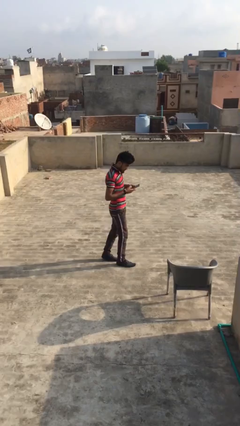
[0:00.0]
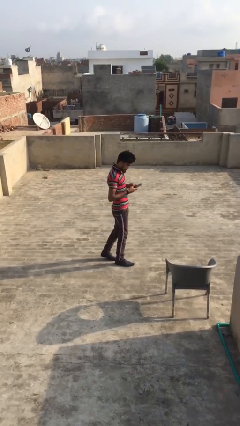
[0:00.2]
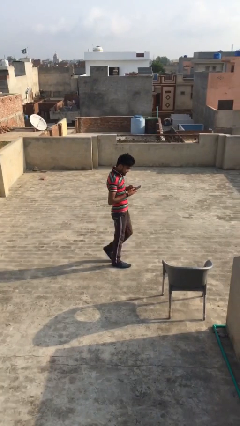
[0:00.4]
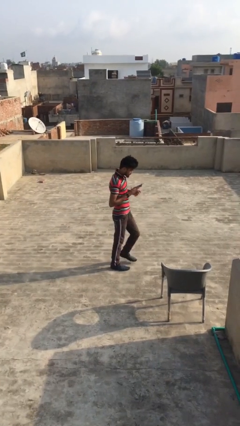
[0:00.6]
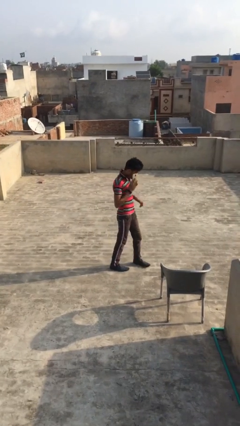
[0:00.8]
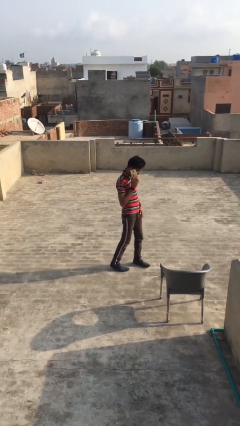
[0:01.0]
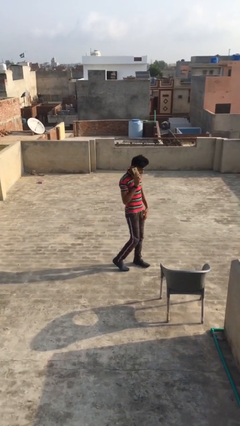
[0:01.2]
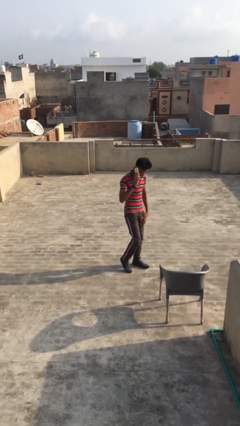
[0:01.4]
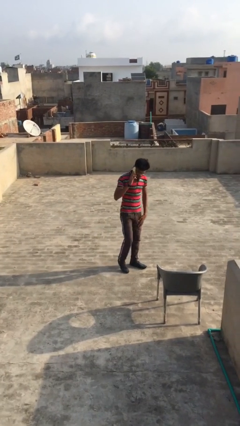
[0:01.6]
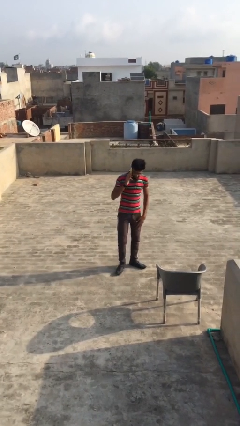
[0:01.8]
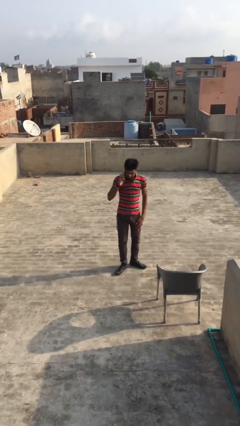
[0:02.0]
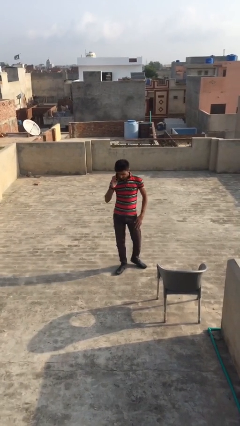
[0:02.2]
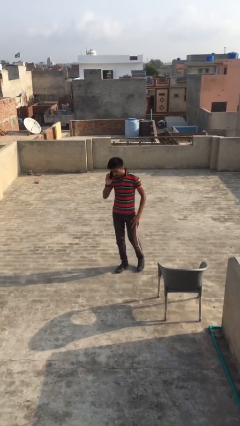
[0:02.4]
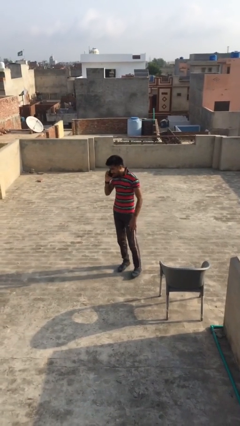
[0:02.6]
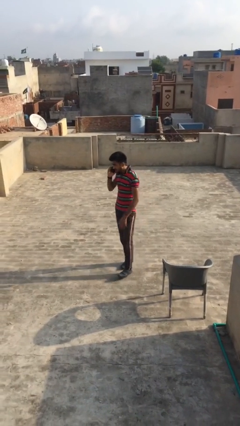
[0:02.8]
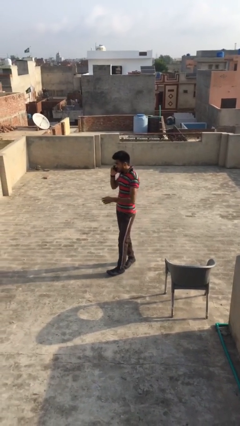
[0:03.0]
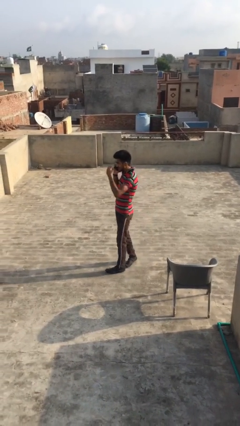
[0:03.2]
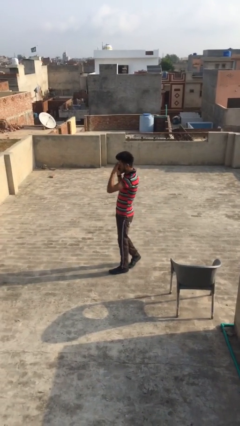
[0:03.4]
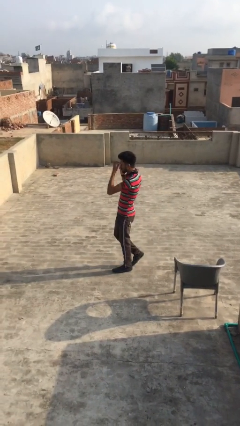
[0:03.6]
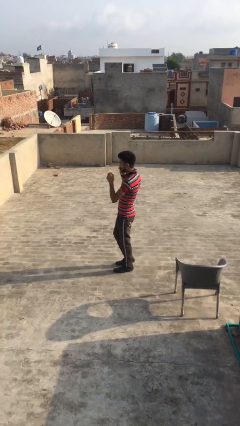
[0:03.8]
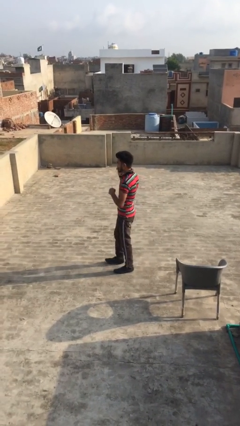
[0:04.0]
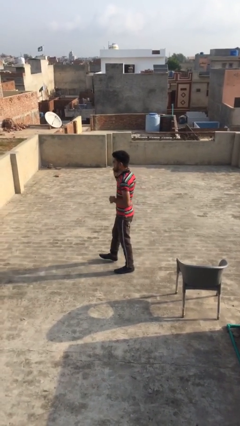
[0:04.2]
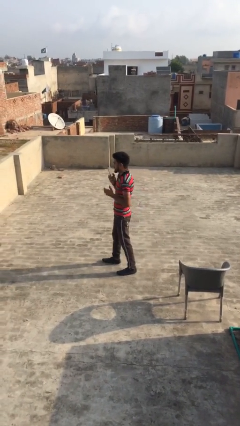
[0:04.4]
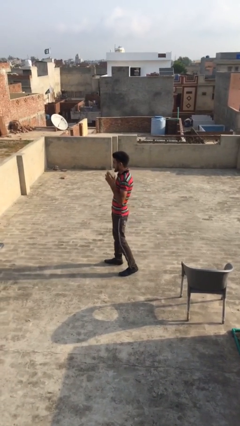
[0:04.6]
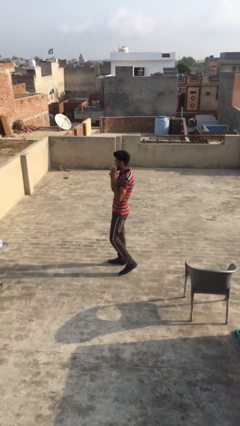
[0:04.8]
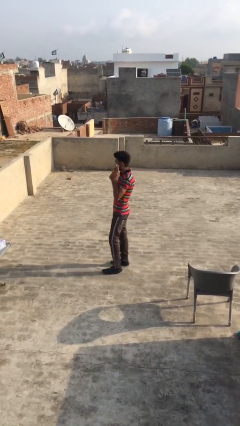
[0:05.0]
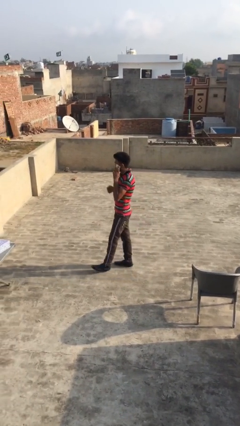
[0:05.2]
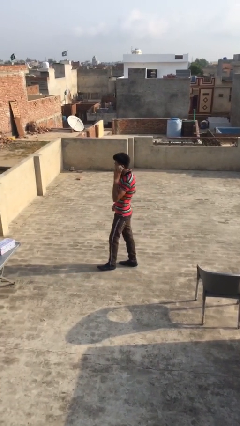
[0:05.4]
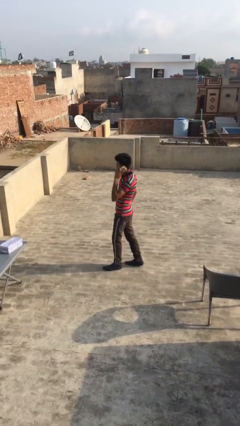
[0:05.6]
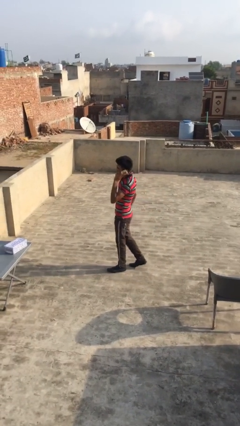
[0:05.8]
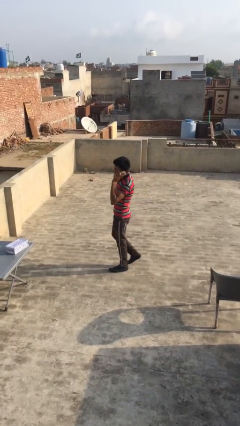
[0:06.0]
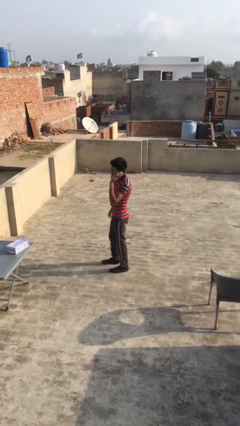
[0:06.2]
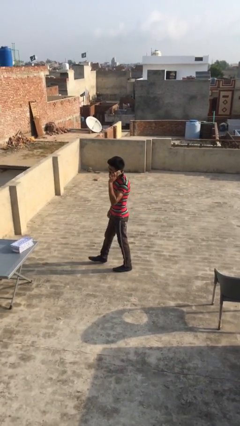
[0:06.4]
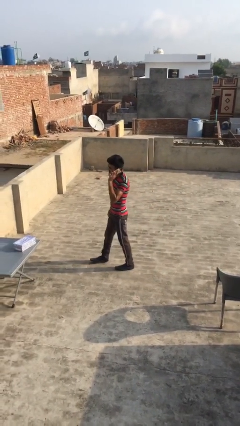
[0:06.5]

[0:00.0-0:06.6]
person talks on phone

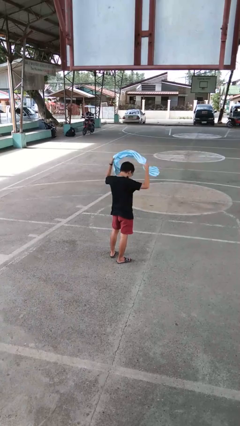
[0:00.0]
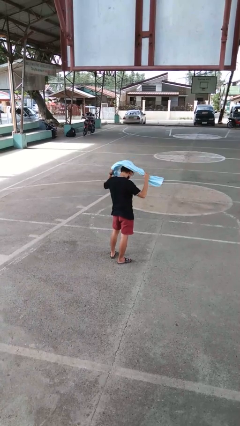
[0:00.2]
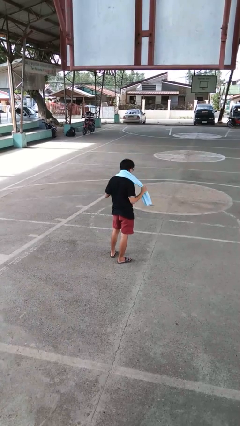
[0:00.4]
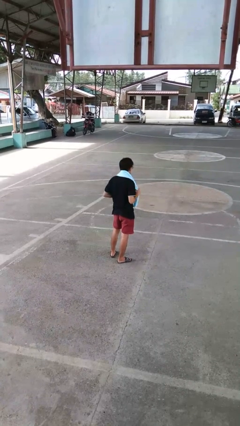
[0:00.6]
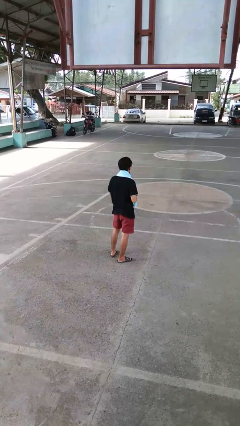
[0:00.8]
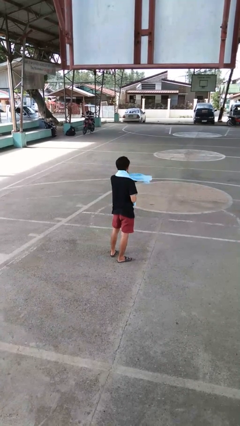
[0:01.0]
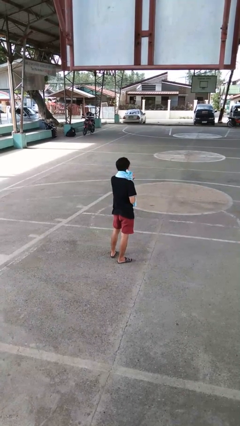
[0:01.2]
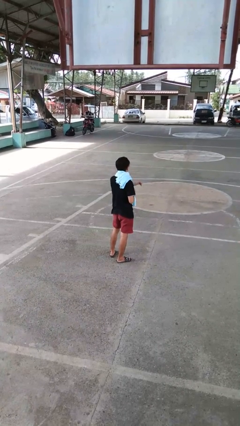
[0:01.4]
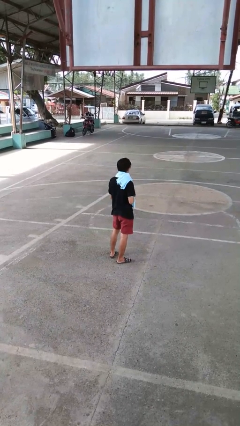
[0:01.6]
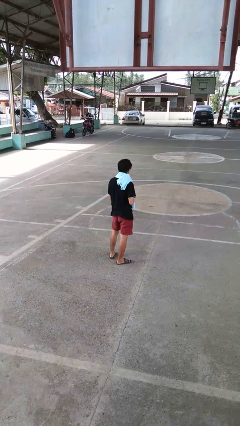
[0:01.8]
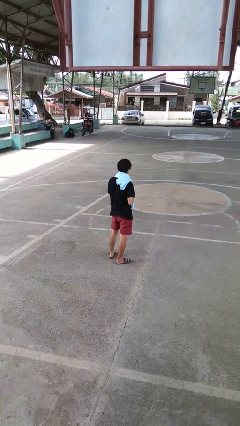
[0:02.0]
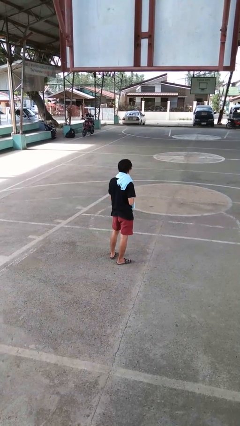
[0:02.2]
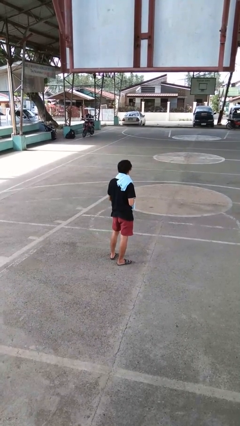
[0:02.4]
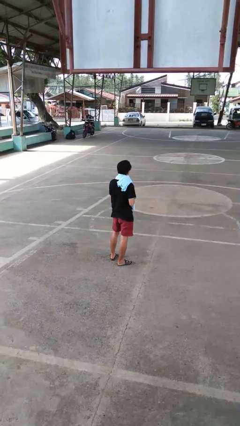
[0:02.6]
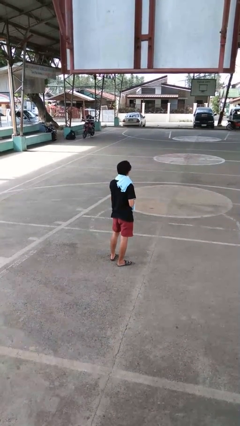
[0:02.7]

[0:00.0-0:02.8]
person puts on scarf

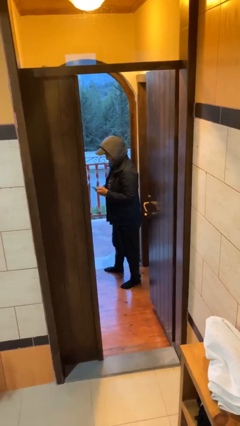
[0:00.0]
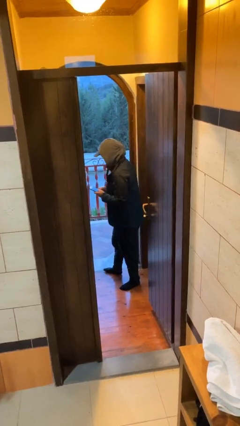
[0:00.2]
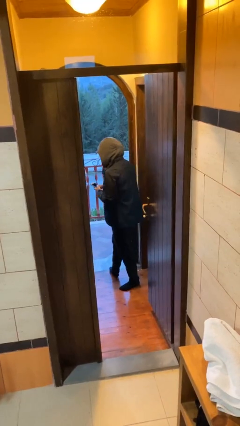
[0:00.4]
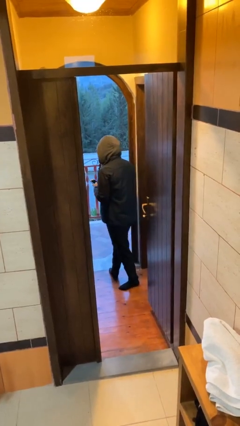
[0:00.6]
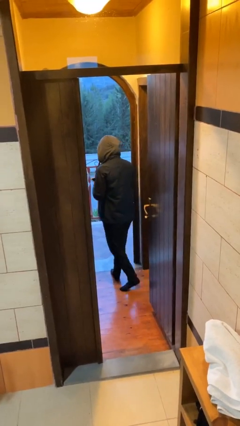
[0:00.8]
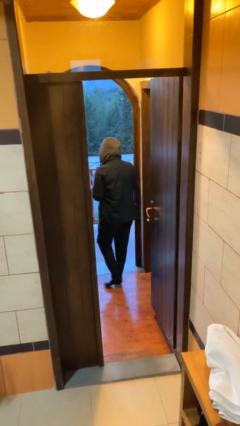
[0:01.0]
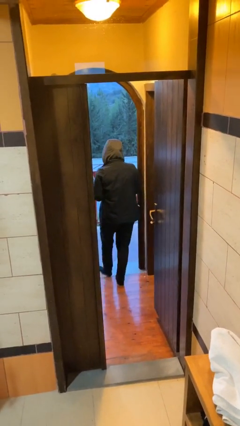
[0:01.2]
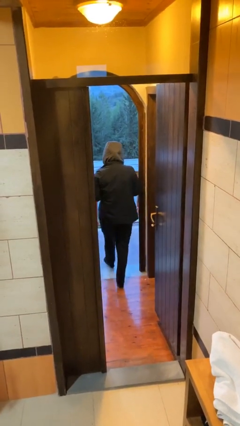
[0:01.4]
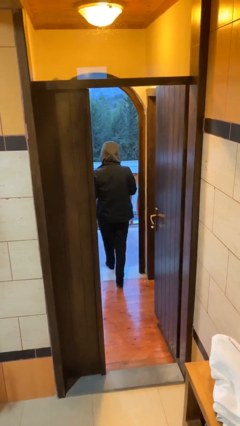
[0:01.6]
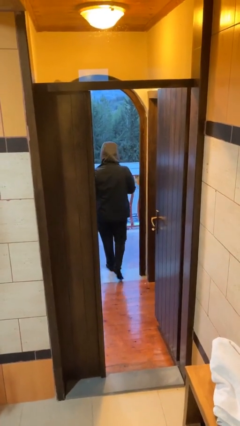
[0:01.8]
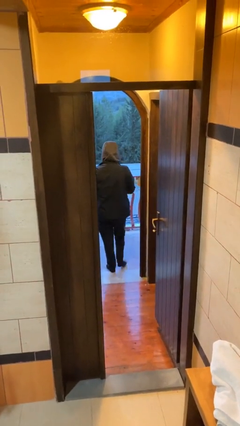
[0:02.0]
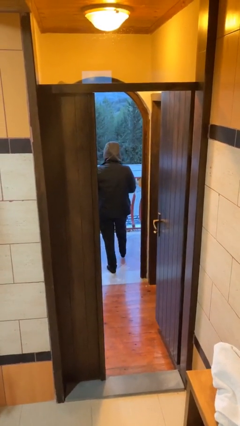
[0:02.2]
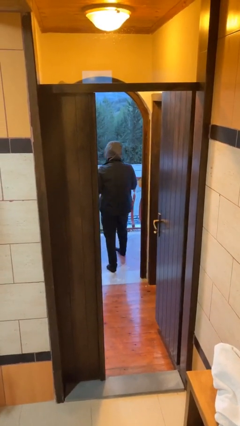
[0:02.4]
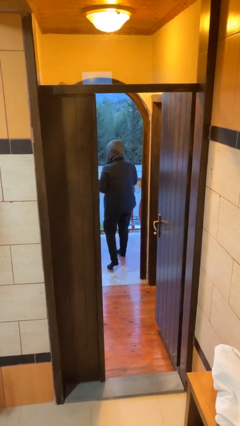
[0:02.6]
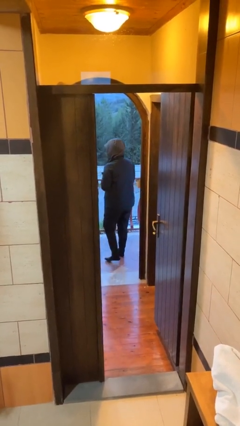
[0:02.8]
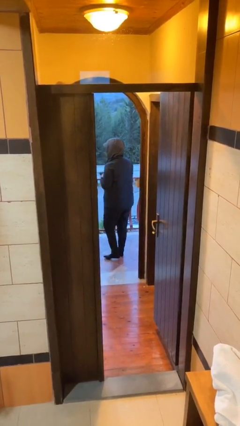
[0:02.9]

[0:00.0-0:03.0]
person exits scene through structure

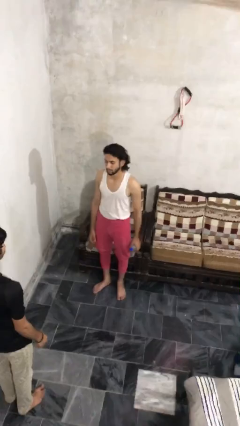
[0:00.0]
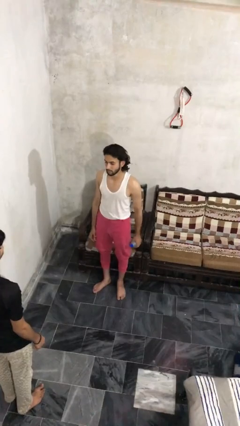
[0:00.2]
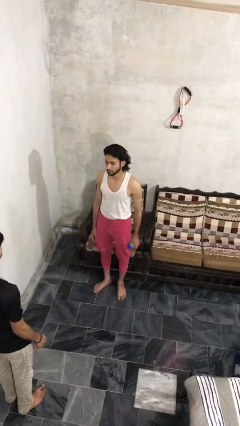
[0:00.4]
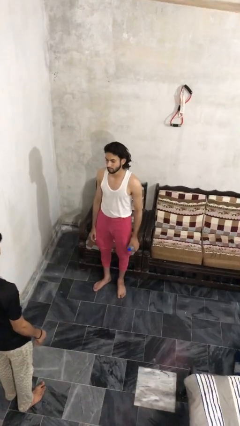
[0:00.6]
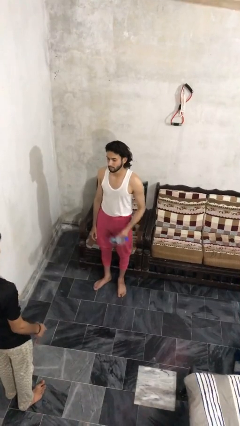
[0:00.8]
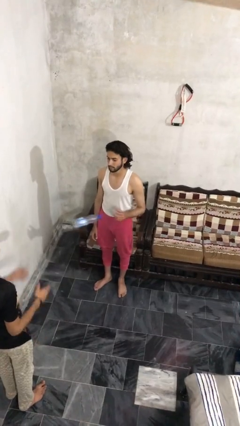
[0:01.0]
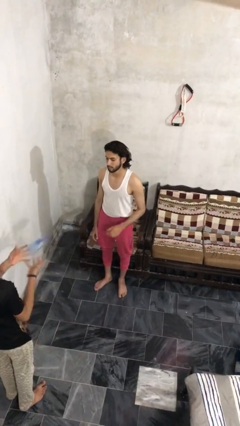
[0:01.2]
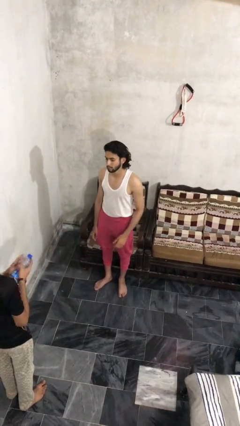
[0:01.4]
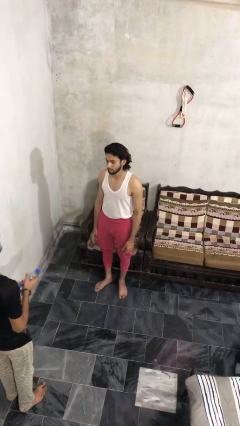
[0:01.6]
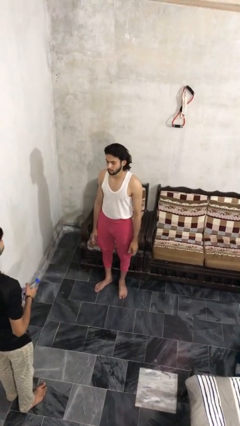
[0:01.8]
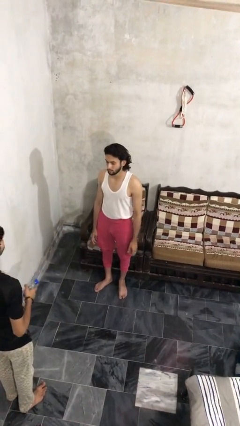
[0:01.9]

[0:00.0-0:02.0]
person throws object to person

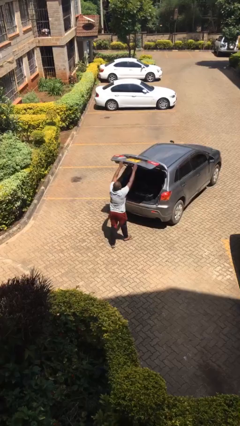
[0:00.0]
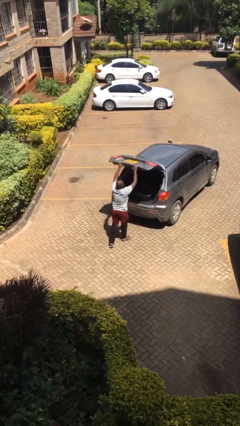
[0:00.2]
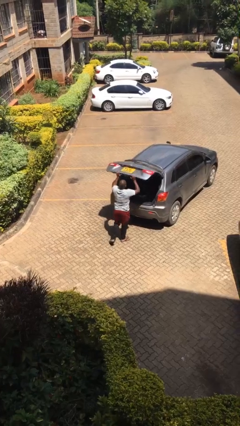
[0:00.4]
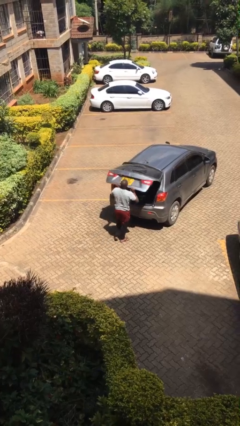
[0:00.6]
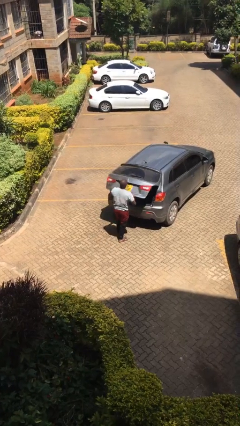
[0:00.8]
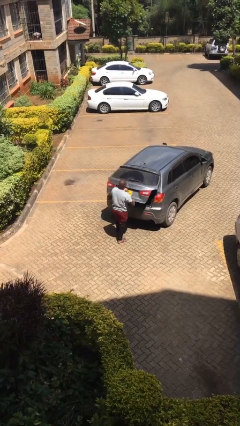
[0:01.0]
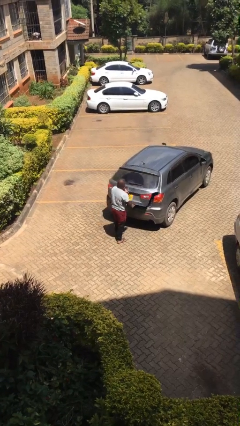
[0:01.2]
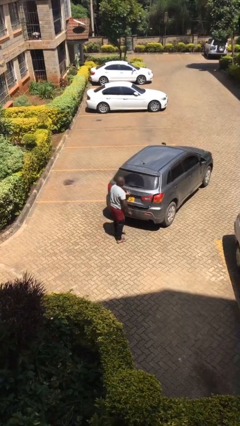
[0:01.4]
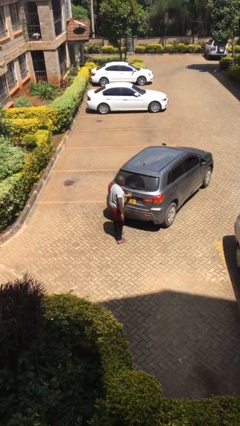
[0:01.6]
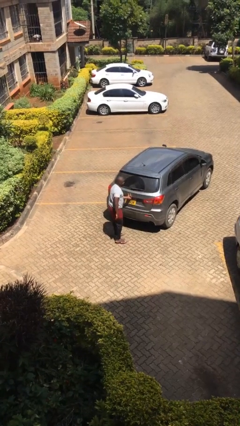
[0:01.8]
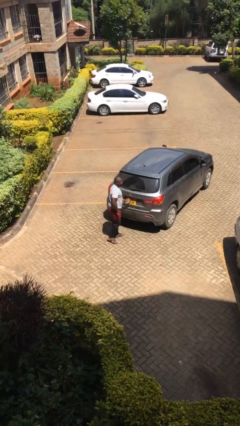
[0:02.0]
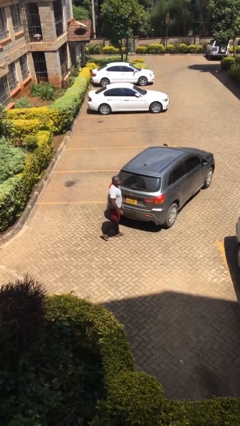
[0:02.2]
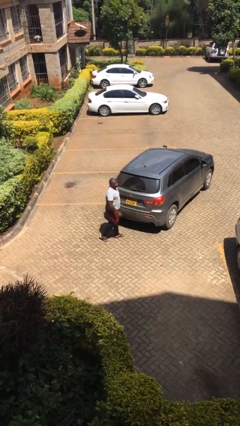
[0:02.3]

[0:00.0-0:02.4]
person closes car trunk

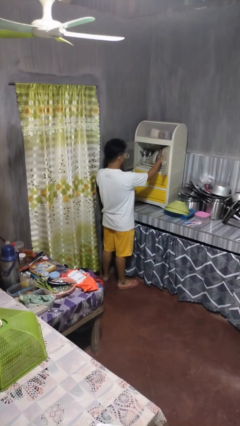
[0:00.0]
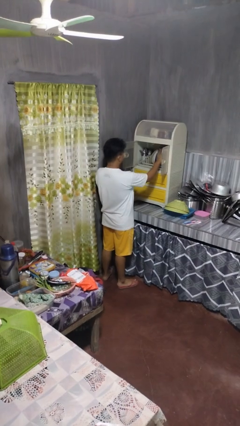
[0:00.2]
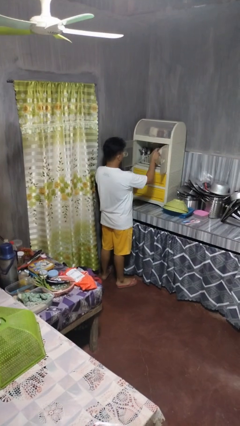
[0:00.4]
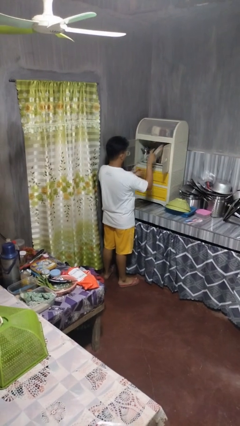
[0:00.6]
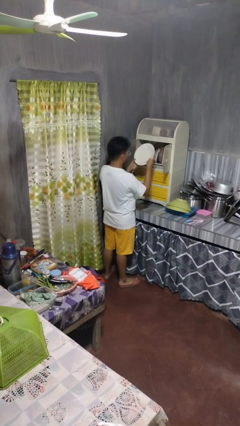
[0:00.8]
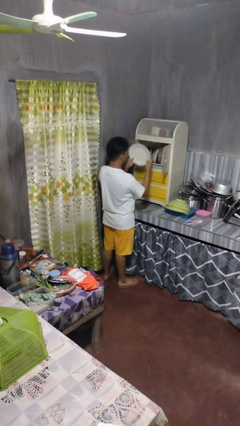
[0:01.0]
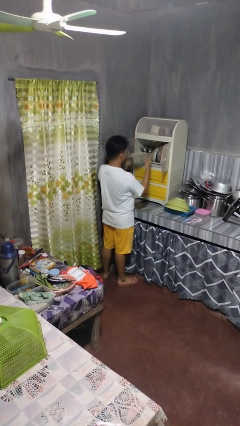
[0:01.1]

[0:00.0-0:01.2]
person takes object from cabinet
